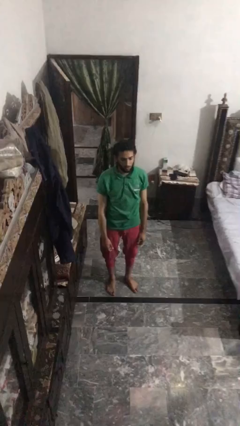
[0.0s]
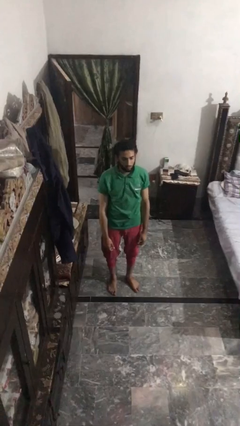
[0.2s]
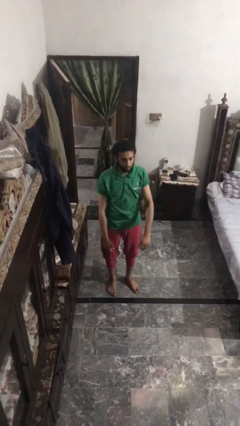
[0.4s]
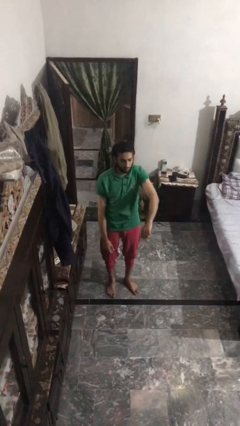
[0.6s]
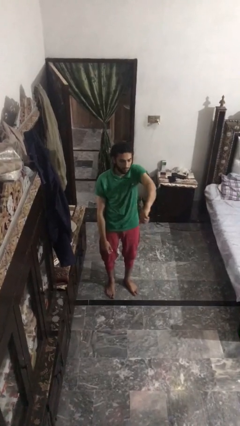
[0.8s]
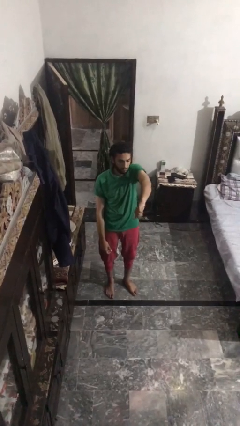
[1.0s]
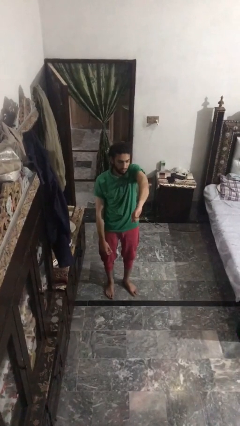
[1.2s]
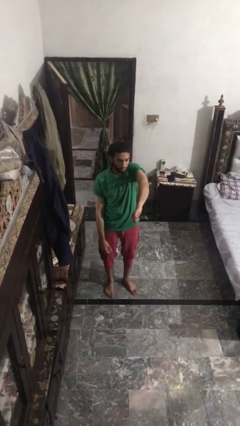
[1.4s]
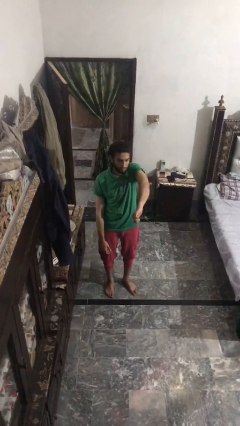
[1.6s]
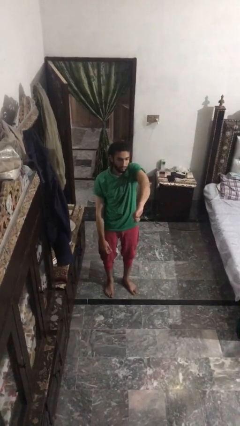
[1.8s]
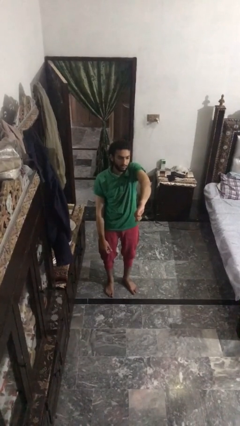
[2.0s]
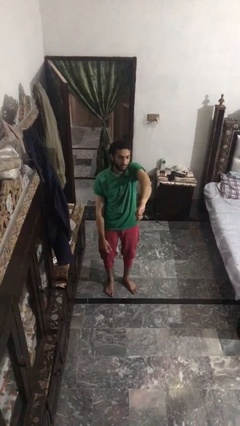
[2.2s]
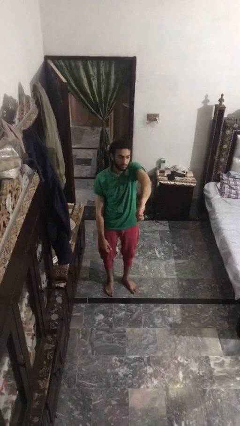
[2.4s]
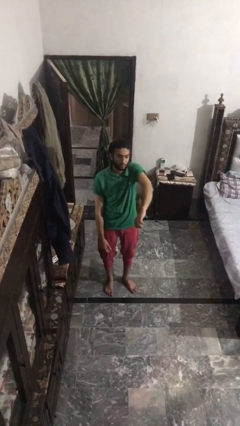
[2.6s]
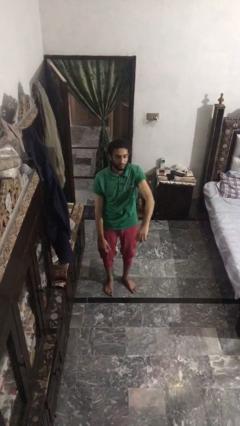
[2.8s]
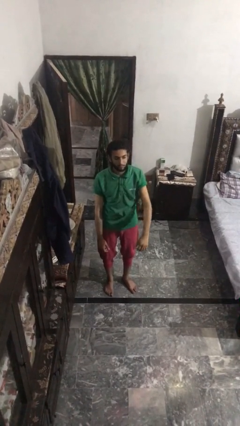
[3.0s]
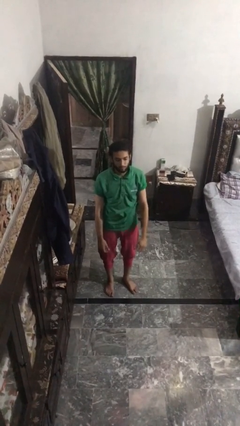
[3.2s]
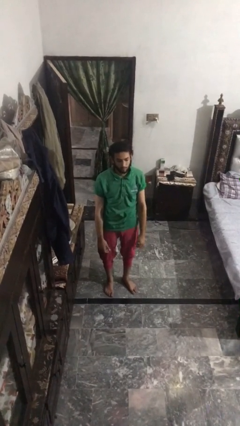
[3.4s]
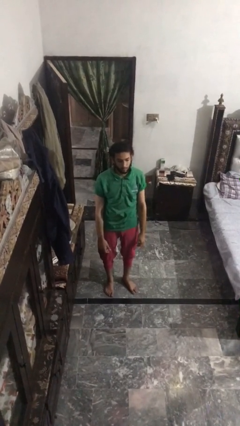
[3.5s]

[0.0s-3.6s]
person gestures thumbs down

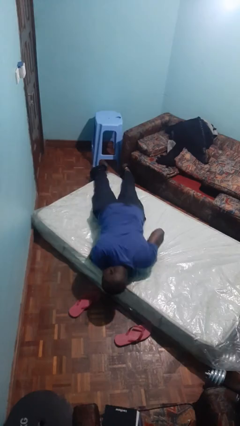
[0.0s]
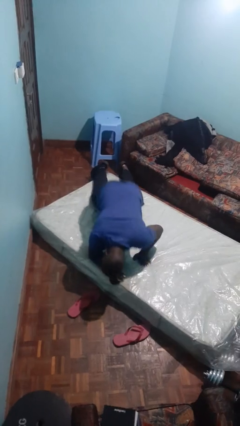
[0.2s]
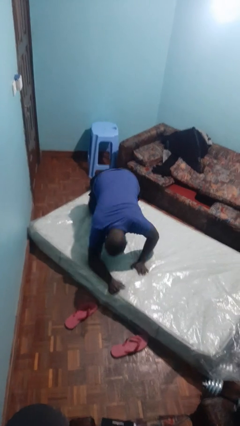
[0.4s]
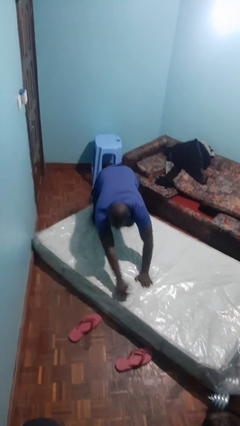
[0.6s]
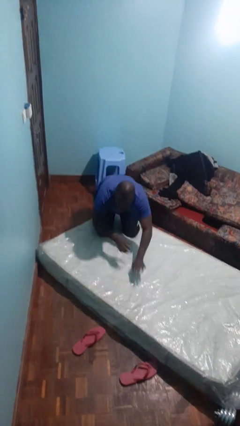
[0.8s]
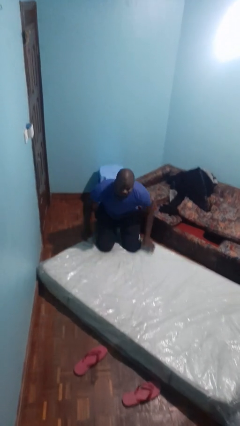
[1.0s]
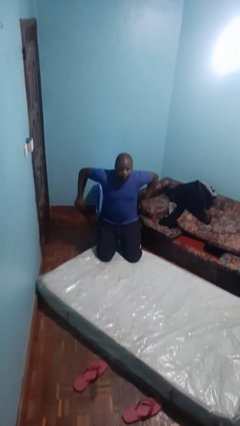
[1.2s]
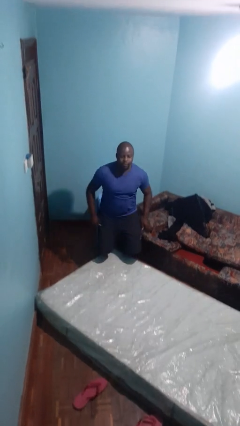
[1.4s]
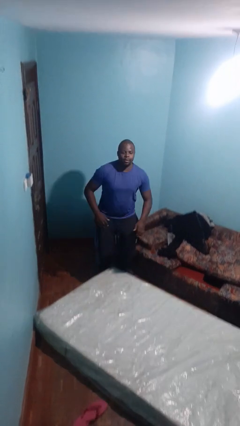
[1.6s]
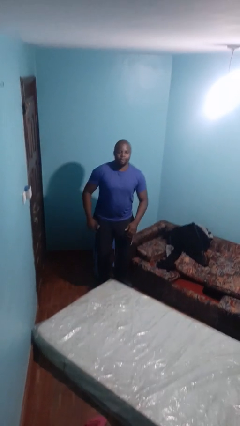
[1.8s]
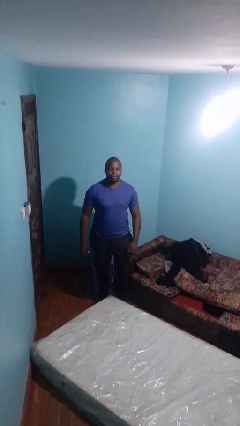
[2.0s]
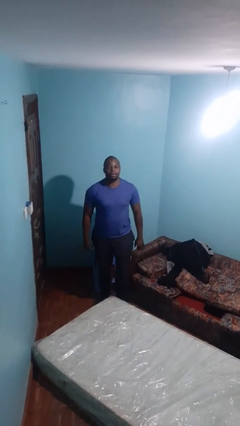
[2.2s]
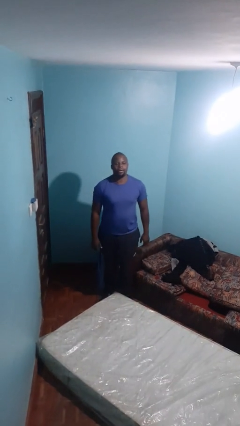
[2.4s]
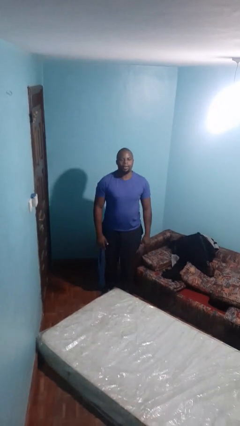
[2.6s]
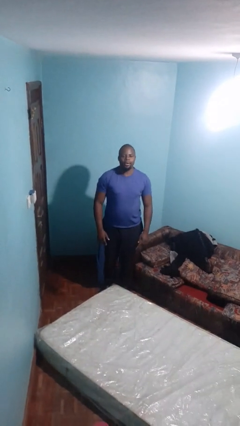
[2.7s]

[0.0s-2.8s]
person stands up

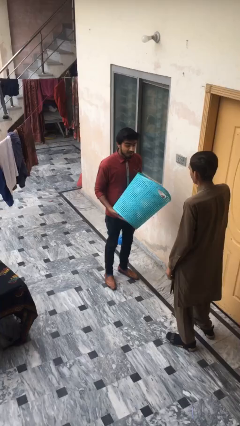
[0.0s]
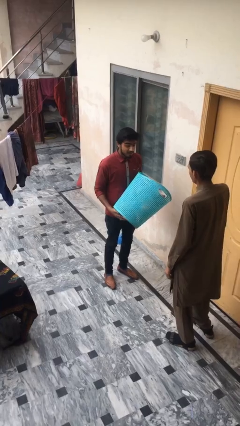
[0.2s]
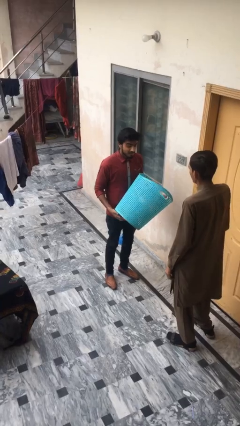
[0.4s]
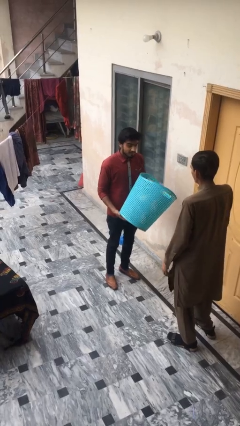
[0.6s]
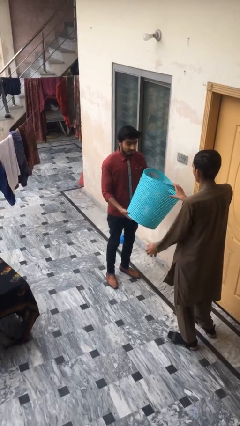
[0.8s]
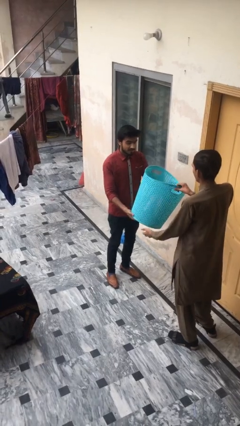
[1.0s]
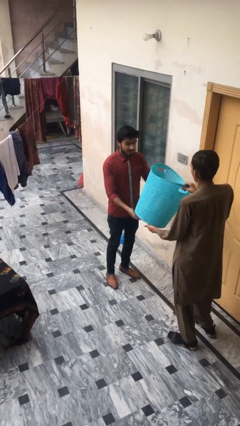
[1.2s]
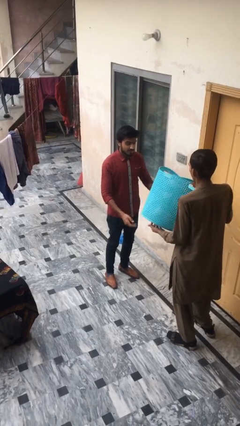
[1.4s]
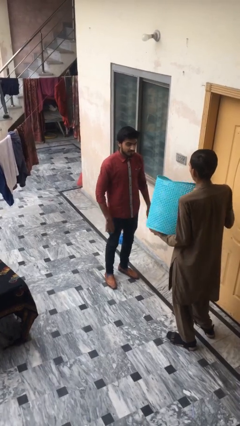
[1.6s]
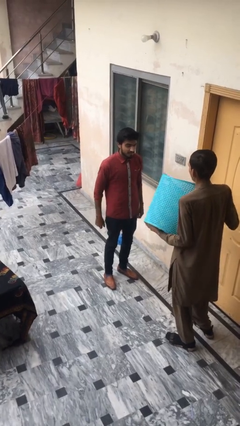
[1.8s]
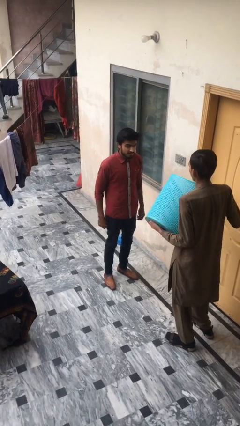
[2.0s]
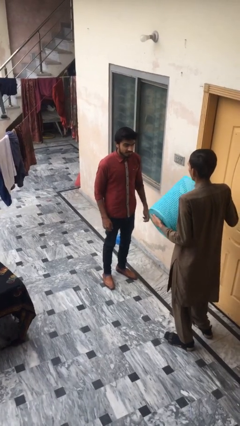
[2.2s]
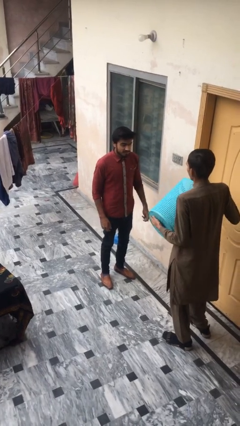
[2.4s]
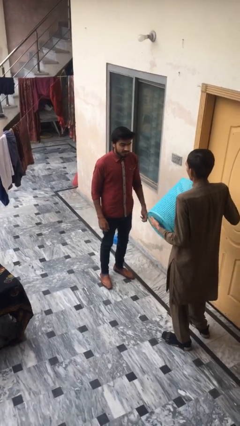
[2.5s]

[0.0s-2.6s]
person transfers object to person

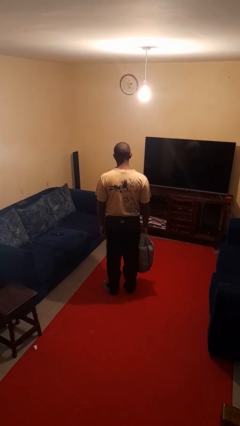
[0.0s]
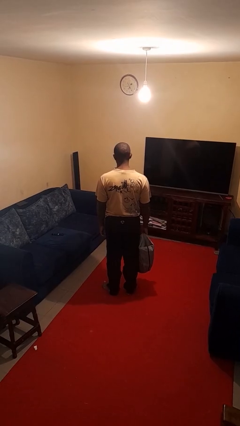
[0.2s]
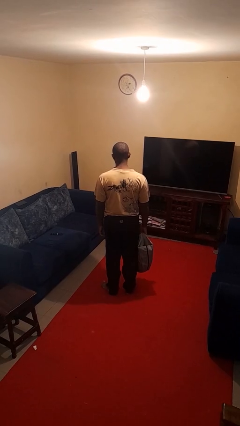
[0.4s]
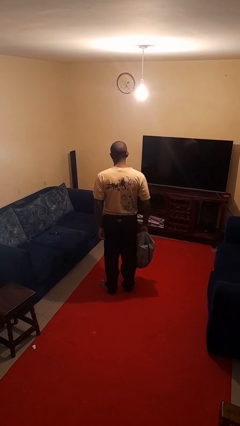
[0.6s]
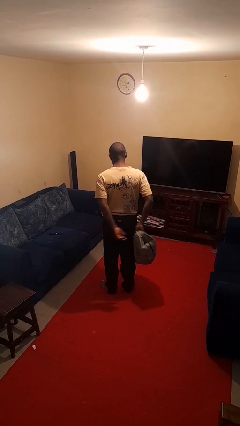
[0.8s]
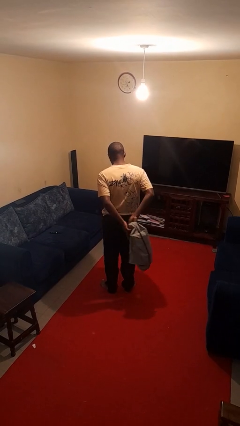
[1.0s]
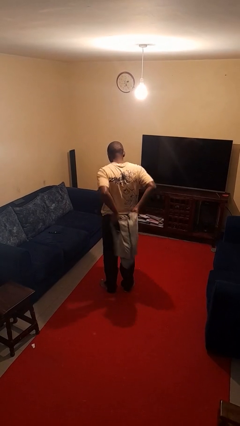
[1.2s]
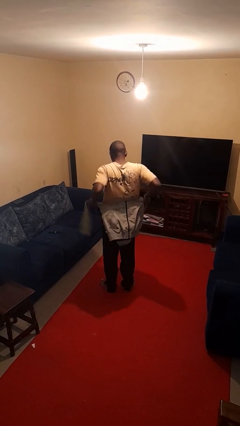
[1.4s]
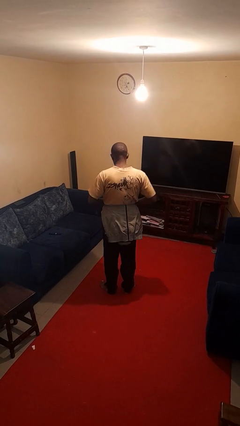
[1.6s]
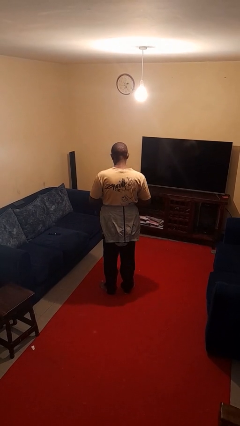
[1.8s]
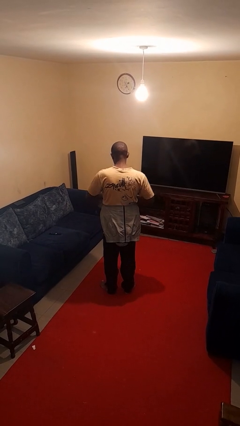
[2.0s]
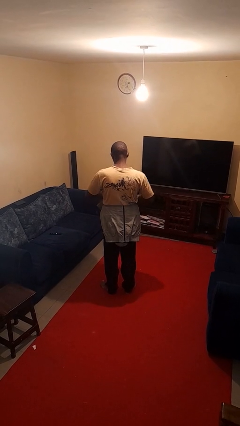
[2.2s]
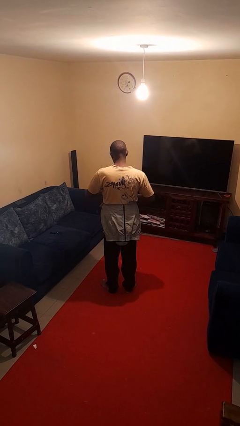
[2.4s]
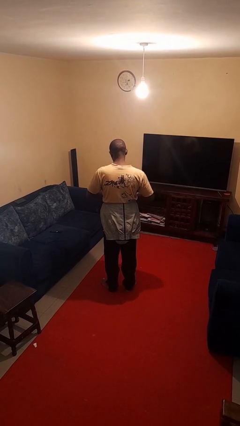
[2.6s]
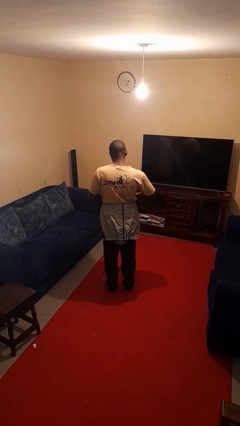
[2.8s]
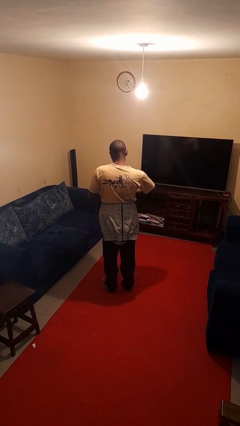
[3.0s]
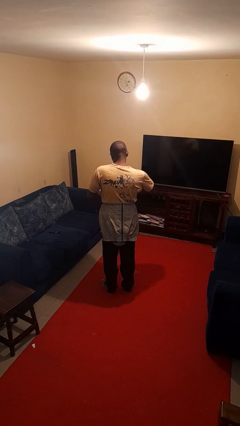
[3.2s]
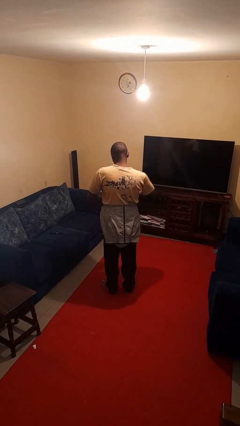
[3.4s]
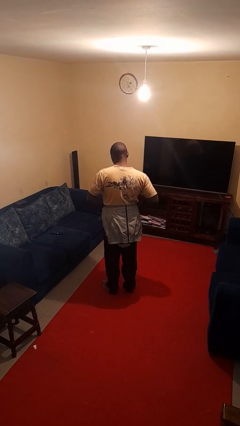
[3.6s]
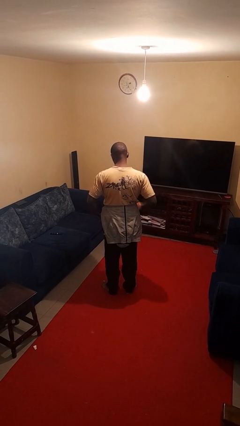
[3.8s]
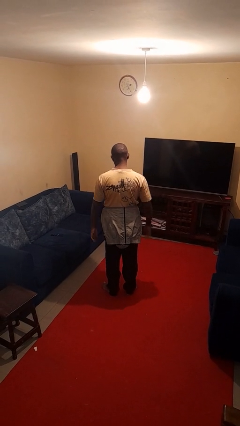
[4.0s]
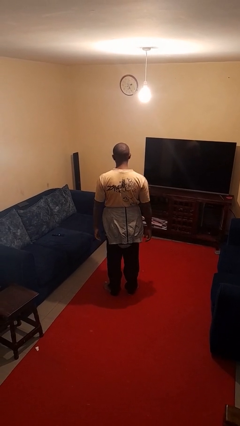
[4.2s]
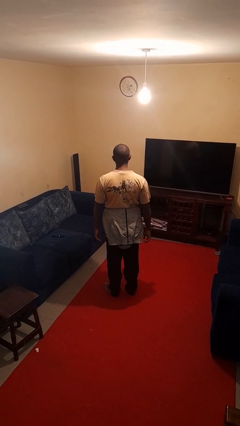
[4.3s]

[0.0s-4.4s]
person ties jacket around waist

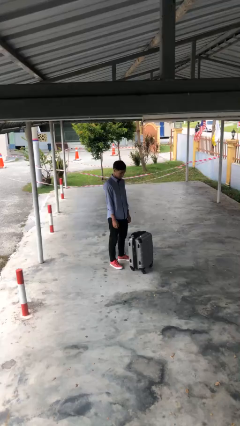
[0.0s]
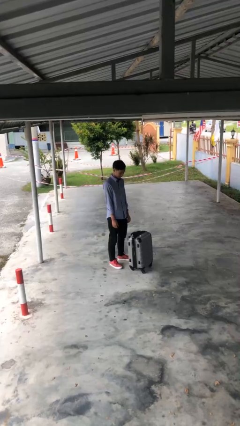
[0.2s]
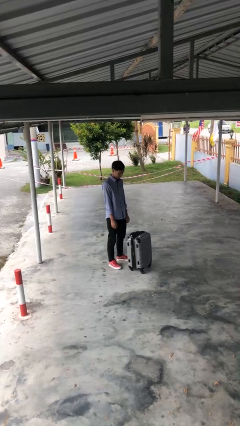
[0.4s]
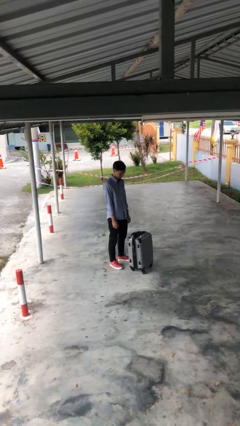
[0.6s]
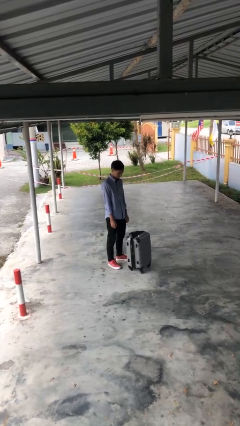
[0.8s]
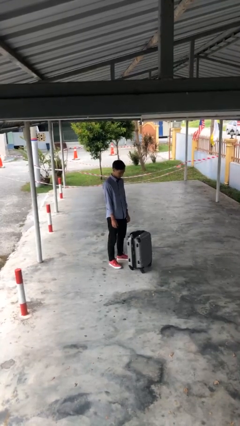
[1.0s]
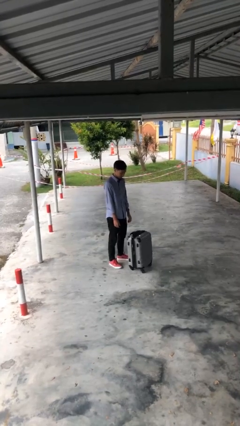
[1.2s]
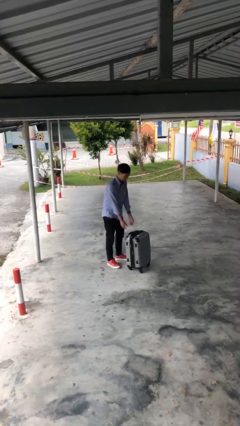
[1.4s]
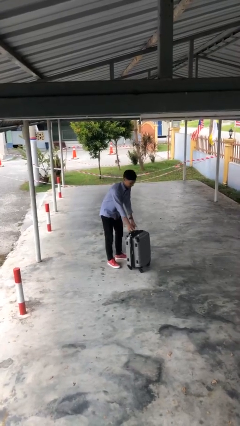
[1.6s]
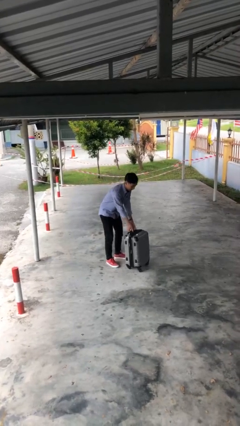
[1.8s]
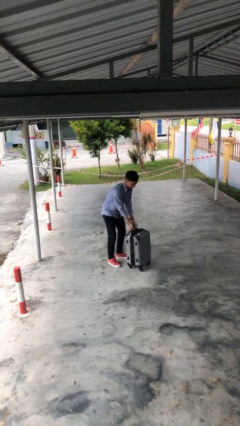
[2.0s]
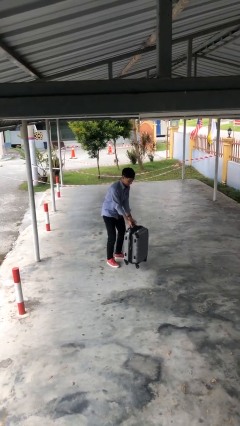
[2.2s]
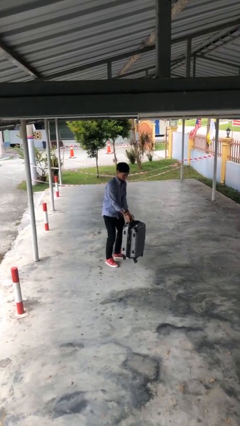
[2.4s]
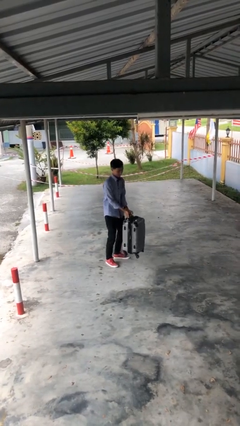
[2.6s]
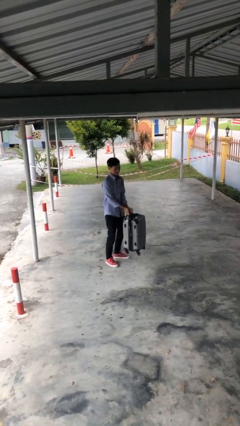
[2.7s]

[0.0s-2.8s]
person picks up object from floor

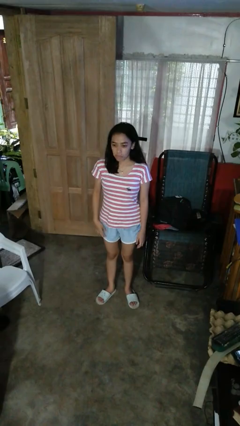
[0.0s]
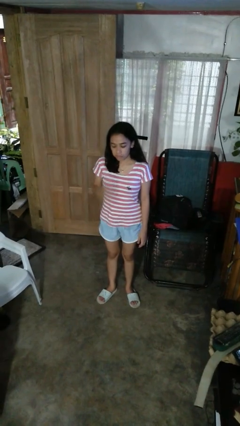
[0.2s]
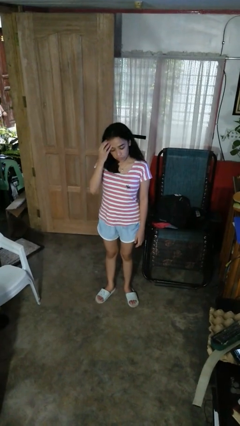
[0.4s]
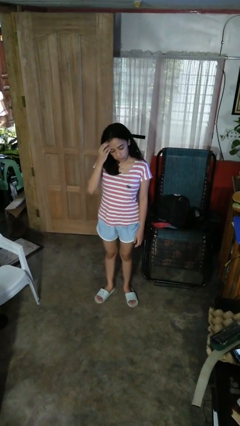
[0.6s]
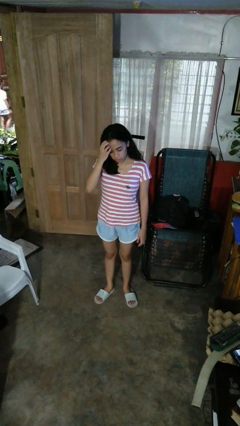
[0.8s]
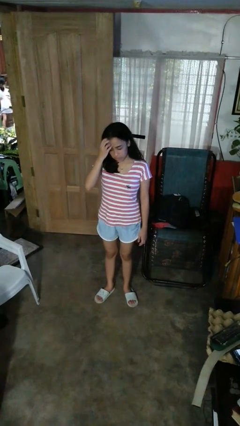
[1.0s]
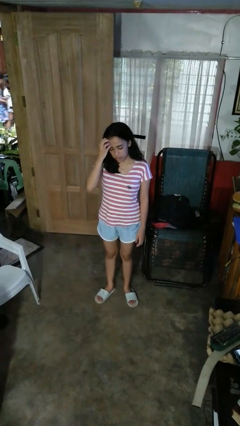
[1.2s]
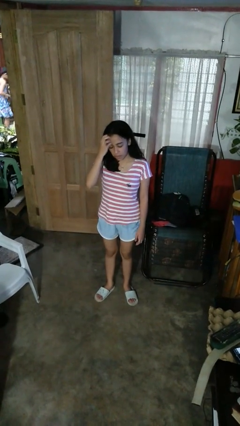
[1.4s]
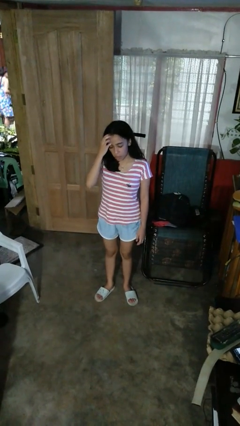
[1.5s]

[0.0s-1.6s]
person scratches face
